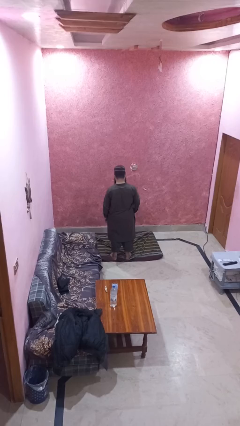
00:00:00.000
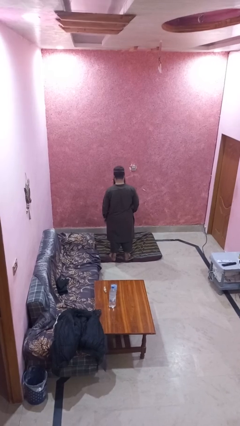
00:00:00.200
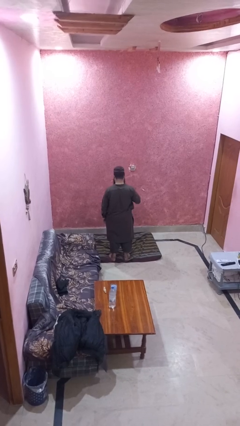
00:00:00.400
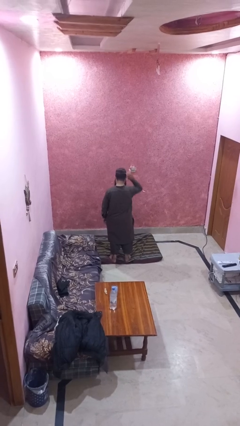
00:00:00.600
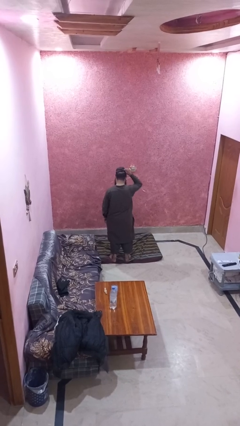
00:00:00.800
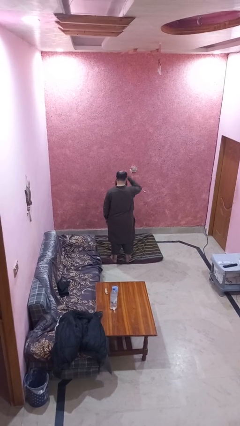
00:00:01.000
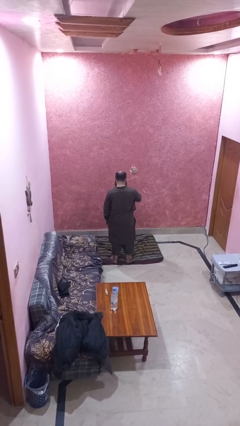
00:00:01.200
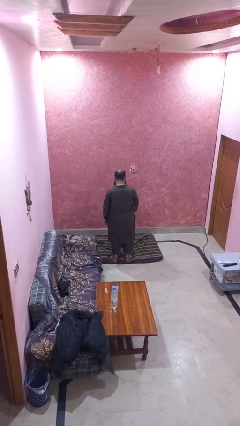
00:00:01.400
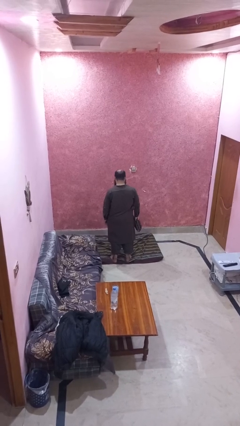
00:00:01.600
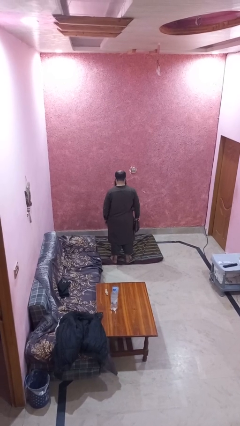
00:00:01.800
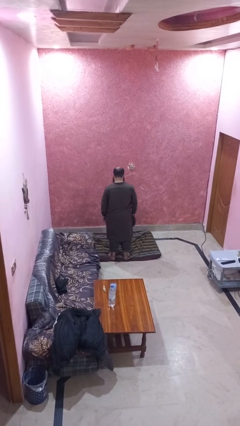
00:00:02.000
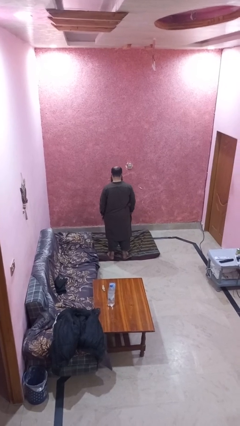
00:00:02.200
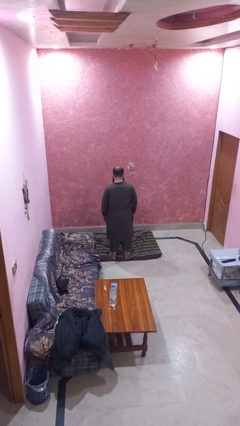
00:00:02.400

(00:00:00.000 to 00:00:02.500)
person takes off hat

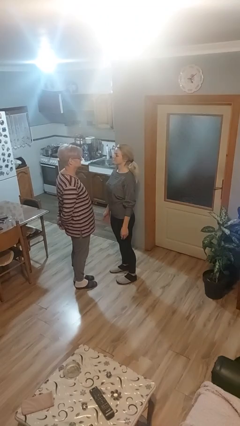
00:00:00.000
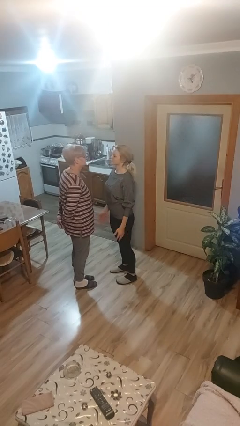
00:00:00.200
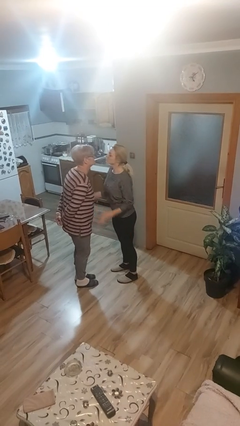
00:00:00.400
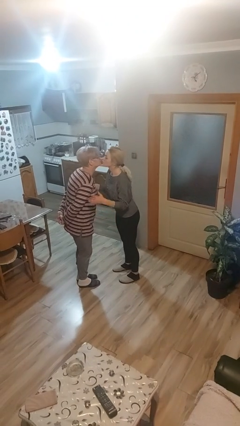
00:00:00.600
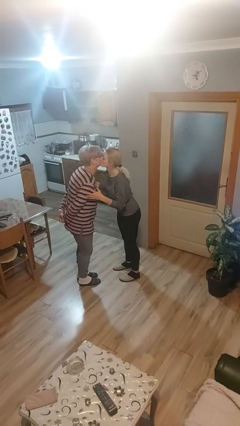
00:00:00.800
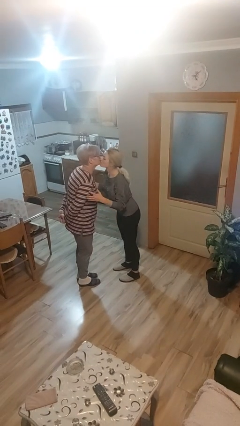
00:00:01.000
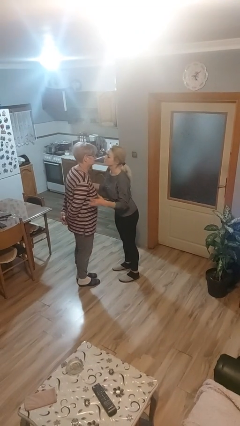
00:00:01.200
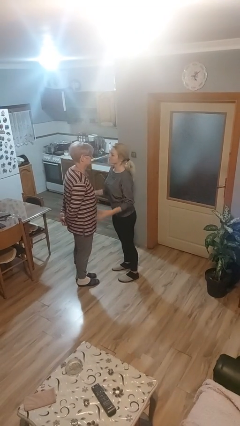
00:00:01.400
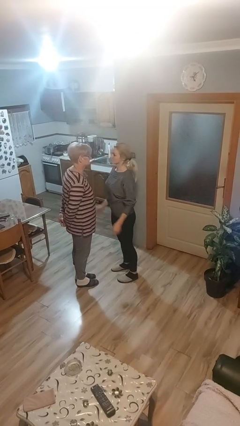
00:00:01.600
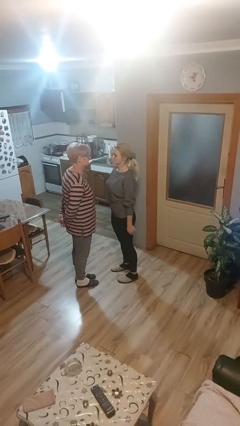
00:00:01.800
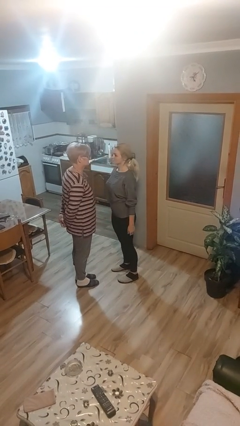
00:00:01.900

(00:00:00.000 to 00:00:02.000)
person kisses cheek of person

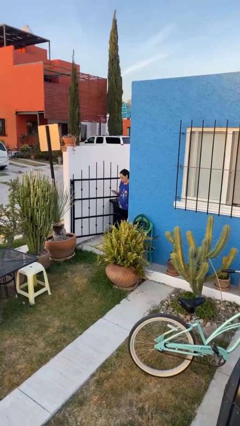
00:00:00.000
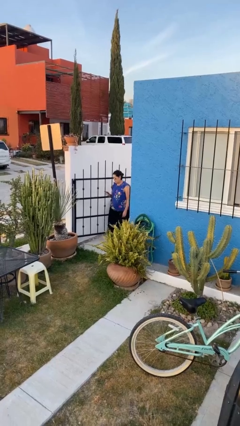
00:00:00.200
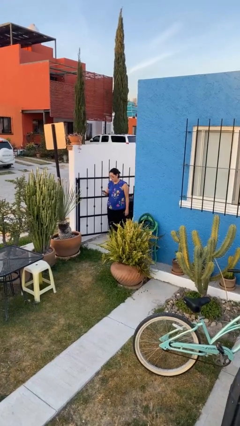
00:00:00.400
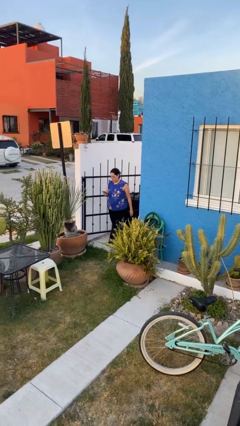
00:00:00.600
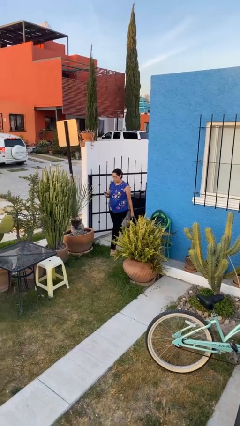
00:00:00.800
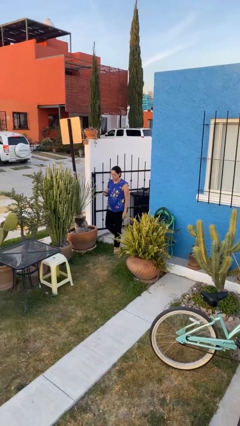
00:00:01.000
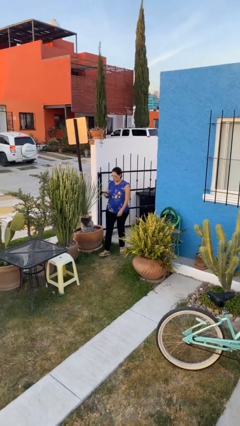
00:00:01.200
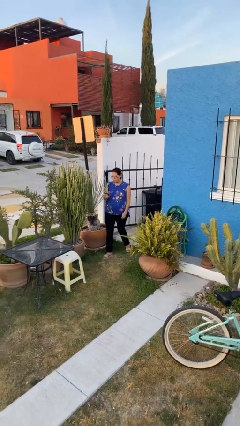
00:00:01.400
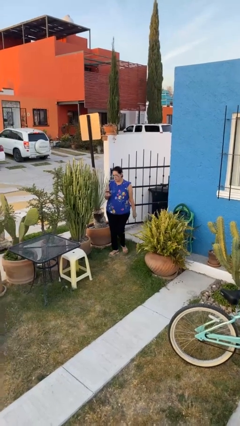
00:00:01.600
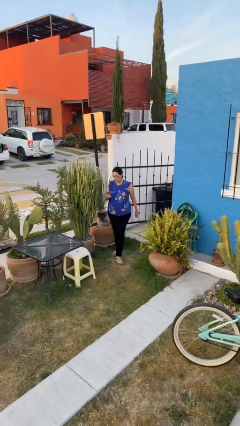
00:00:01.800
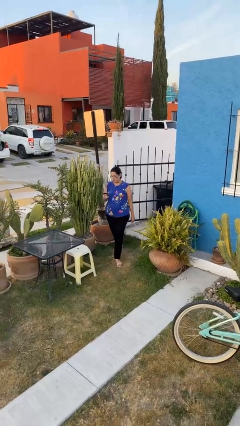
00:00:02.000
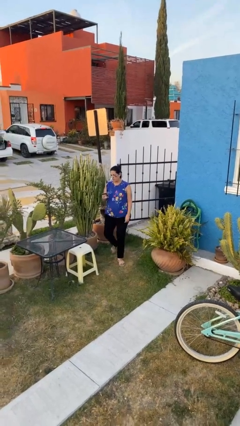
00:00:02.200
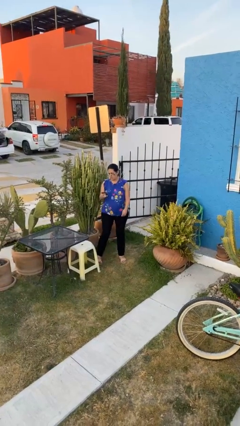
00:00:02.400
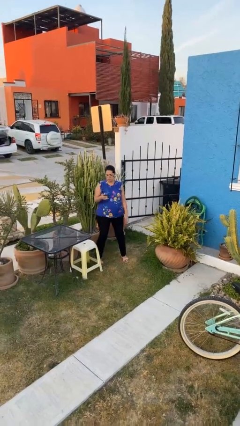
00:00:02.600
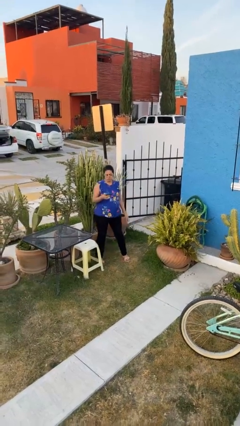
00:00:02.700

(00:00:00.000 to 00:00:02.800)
person enters scene through structure

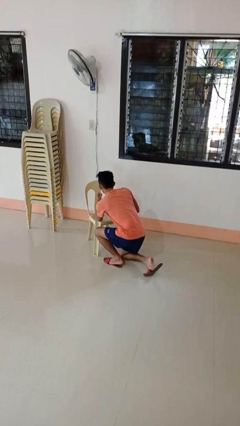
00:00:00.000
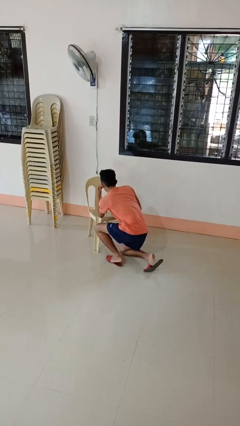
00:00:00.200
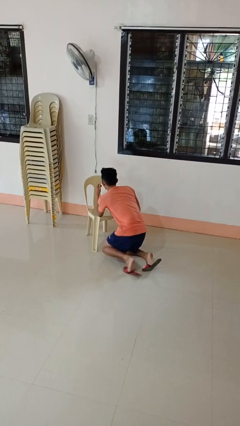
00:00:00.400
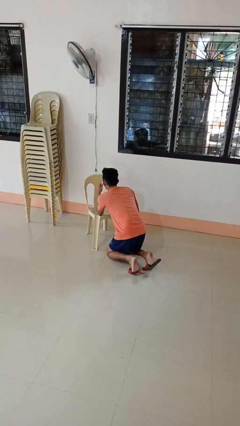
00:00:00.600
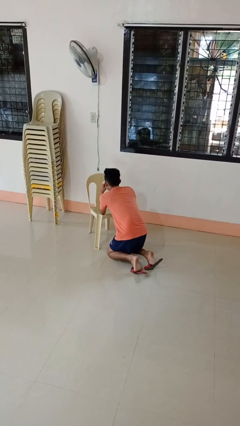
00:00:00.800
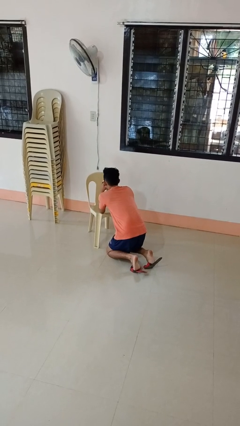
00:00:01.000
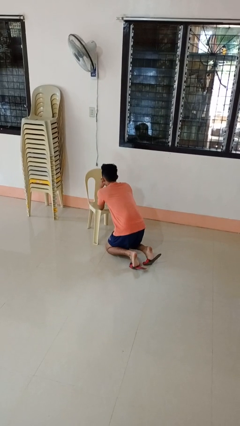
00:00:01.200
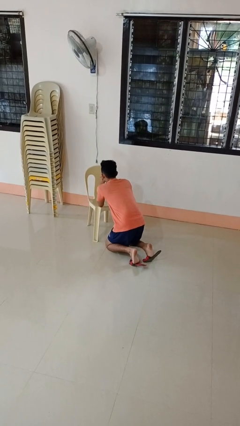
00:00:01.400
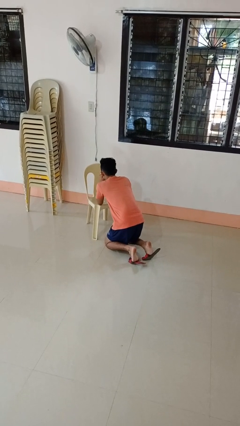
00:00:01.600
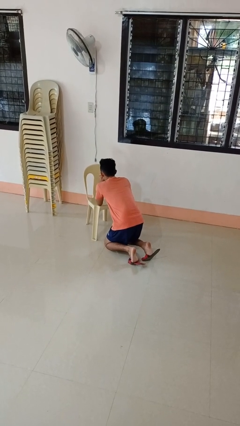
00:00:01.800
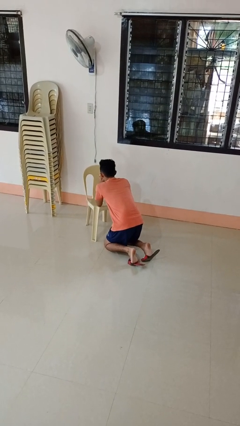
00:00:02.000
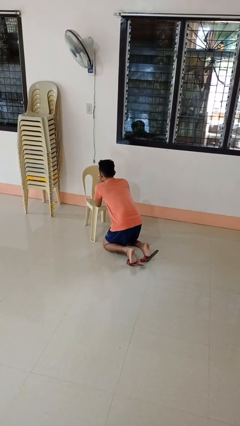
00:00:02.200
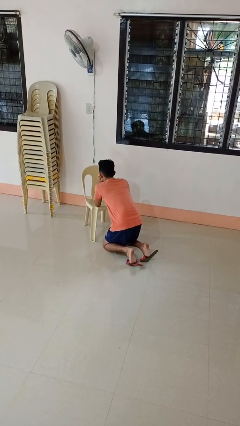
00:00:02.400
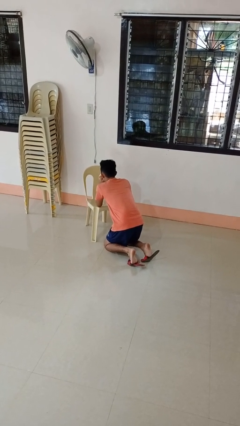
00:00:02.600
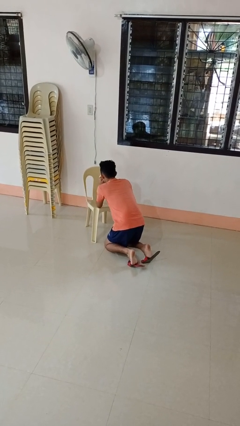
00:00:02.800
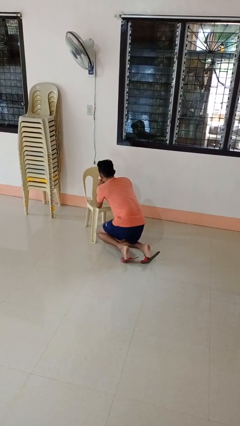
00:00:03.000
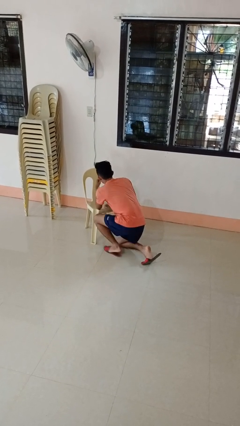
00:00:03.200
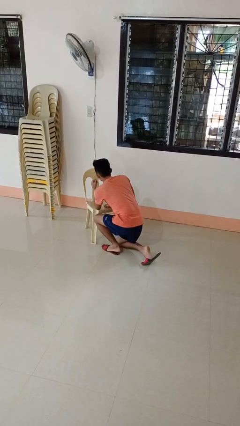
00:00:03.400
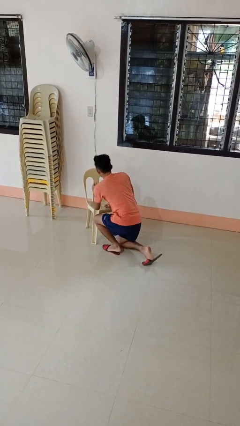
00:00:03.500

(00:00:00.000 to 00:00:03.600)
person prays

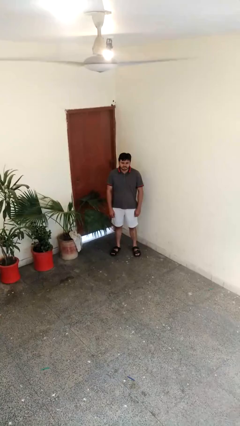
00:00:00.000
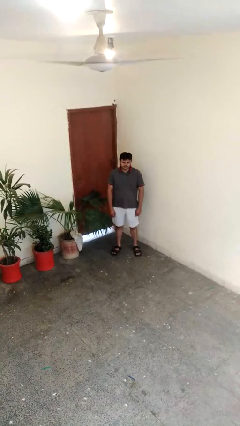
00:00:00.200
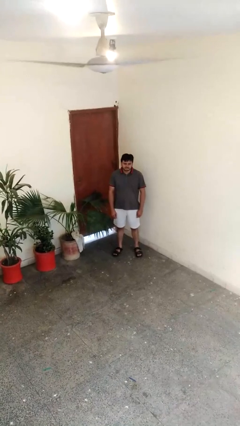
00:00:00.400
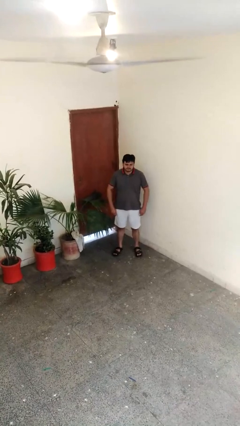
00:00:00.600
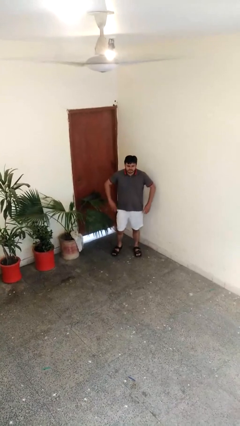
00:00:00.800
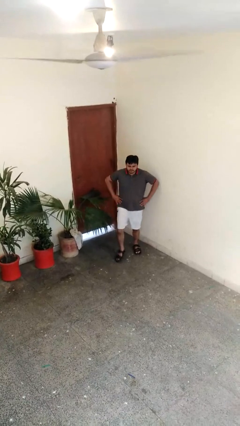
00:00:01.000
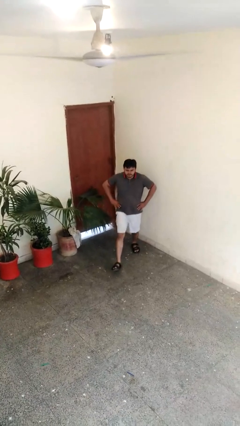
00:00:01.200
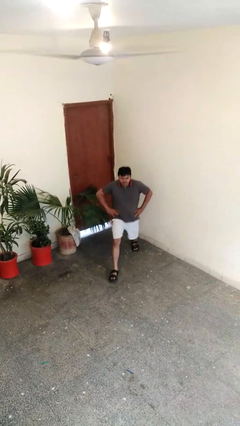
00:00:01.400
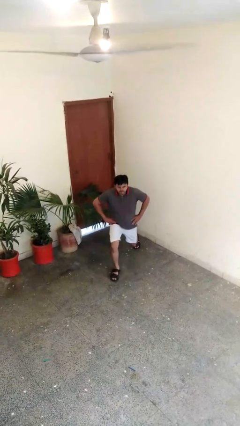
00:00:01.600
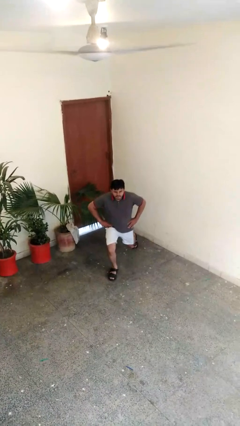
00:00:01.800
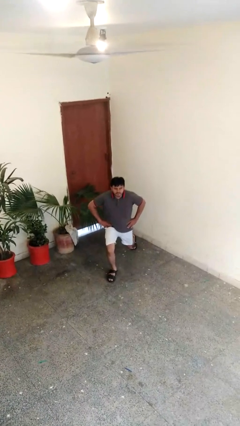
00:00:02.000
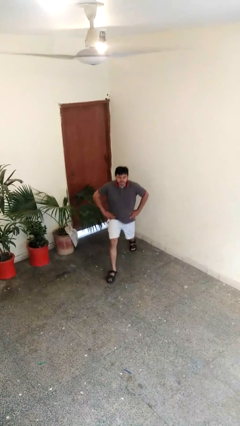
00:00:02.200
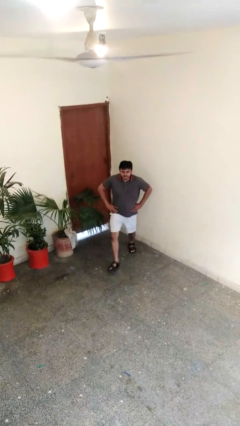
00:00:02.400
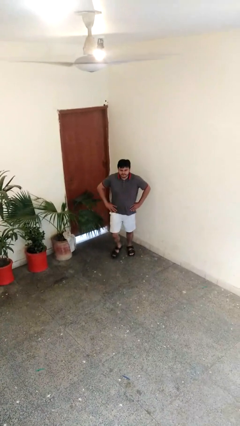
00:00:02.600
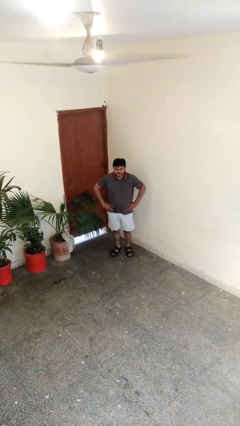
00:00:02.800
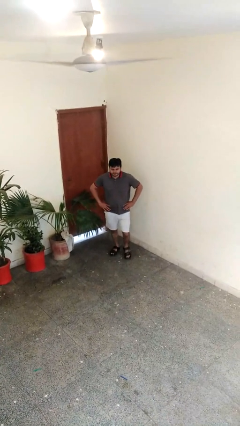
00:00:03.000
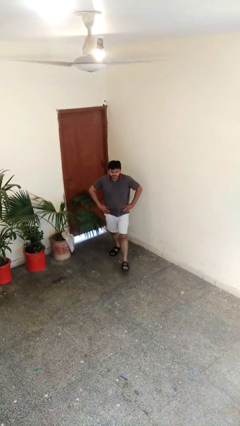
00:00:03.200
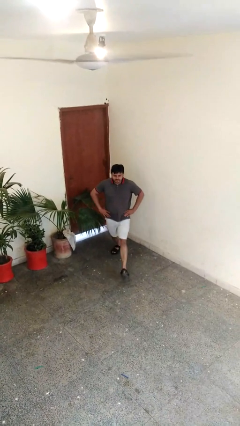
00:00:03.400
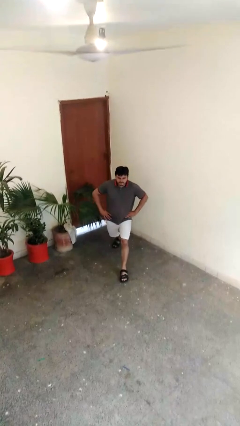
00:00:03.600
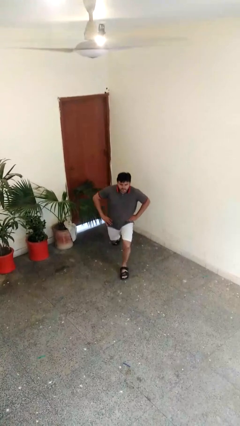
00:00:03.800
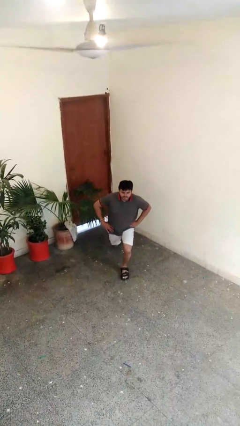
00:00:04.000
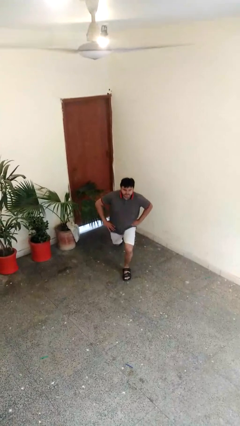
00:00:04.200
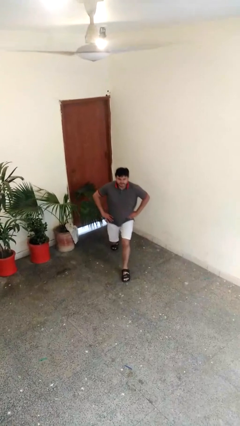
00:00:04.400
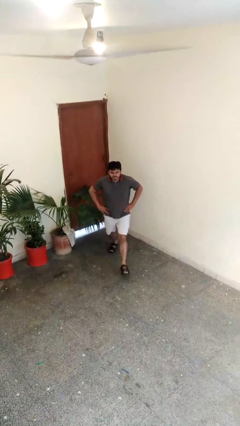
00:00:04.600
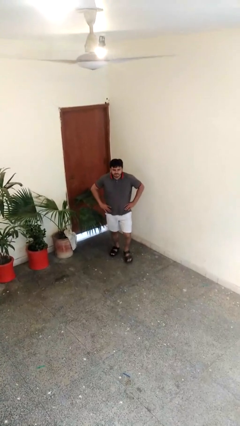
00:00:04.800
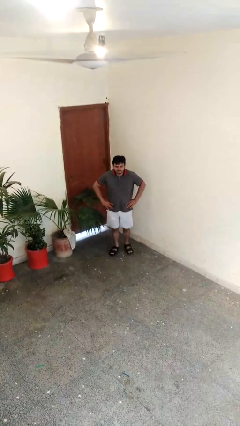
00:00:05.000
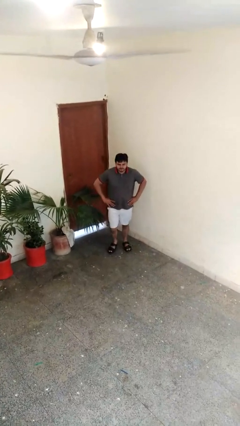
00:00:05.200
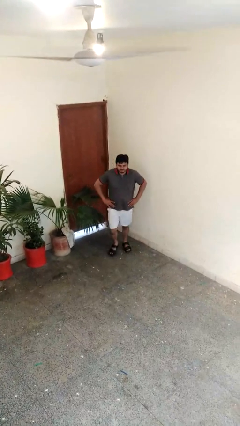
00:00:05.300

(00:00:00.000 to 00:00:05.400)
person exercises with lunges

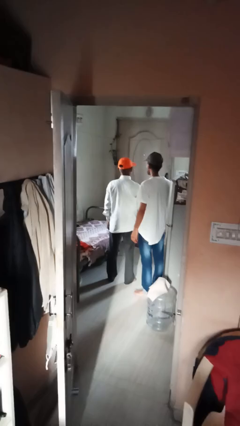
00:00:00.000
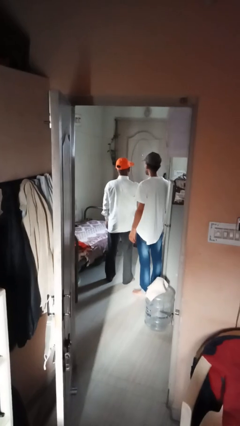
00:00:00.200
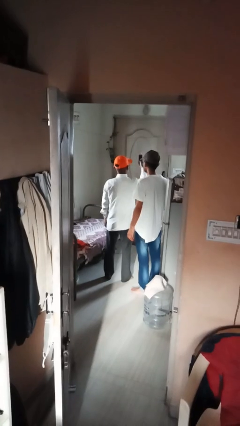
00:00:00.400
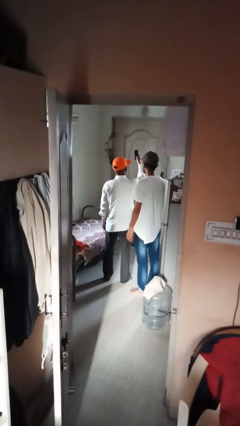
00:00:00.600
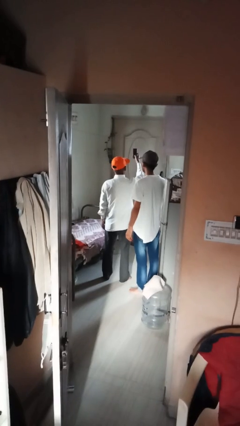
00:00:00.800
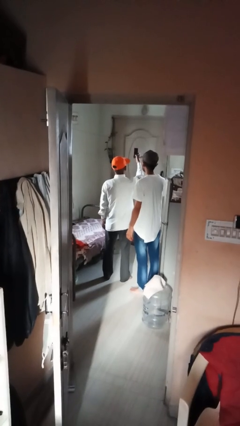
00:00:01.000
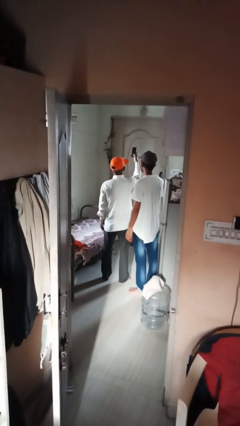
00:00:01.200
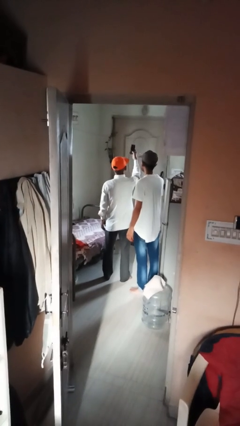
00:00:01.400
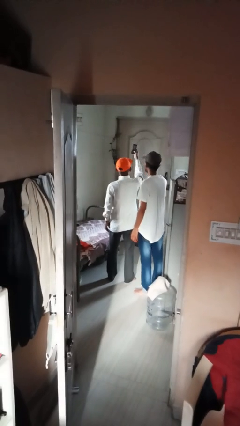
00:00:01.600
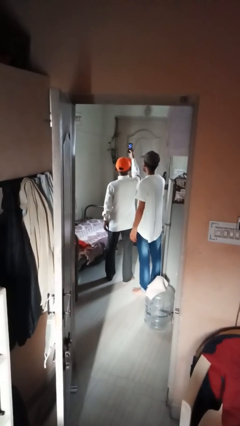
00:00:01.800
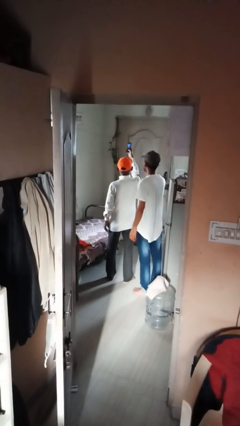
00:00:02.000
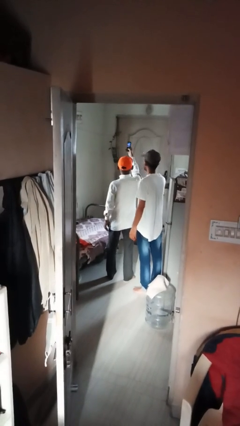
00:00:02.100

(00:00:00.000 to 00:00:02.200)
person takes selfie with person
